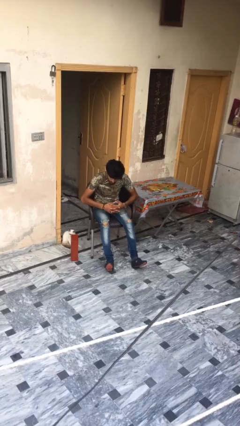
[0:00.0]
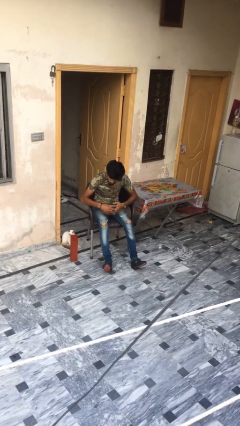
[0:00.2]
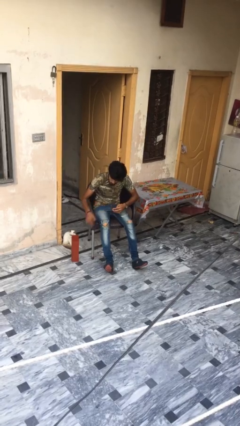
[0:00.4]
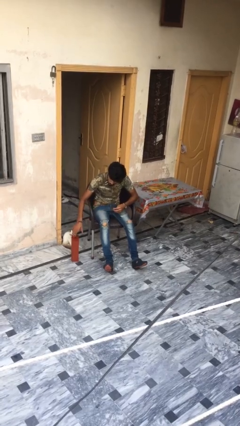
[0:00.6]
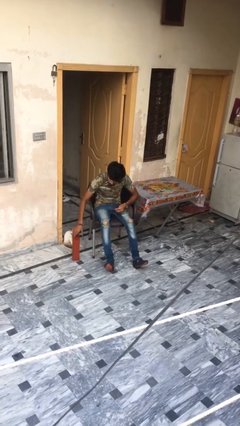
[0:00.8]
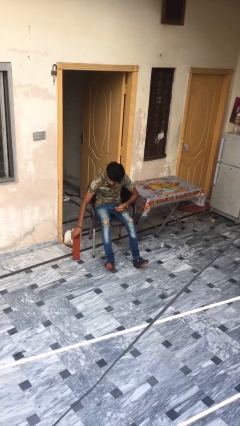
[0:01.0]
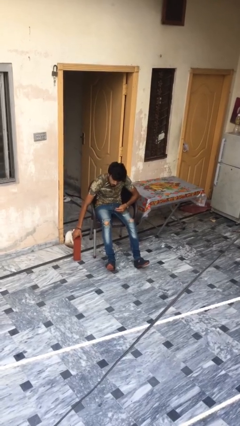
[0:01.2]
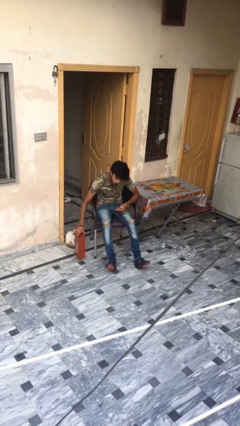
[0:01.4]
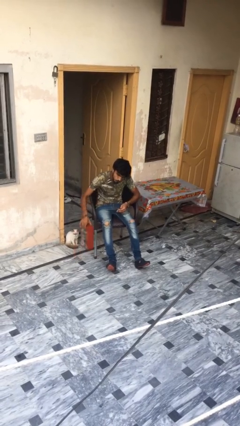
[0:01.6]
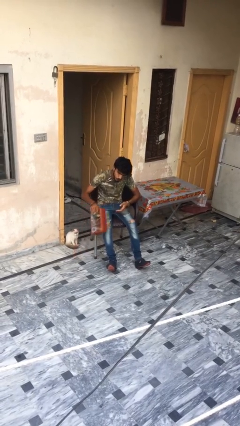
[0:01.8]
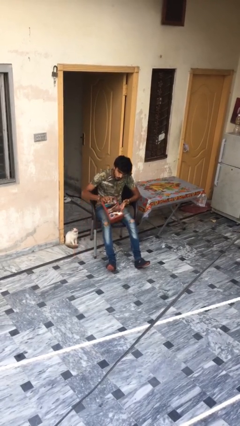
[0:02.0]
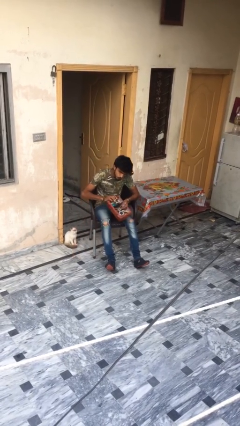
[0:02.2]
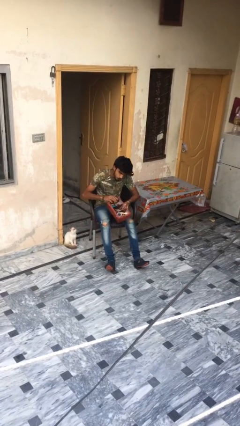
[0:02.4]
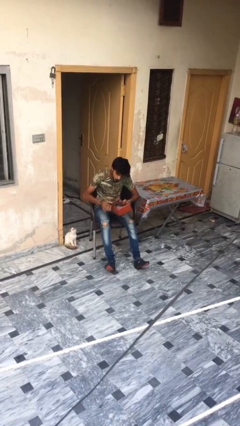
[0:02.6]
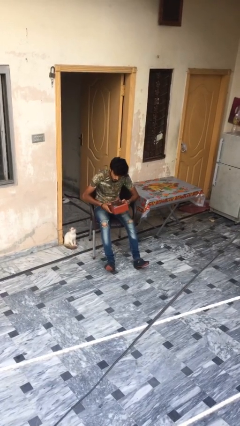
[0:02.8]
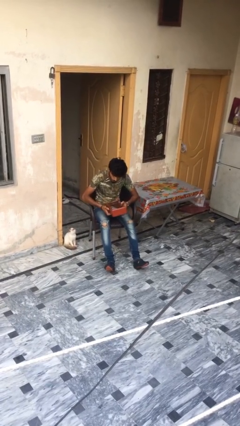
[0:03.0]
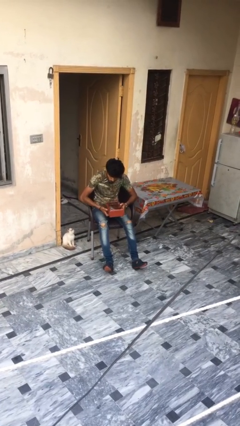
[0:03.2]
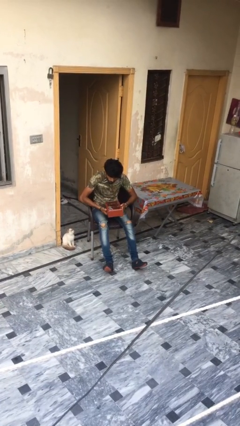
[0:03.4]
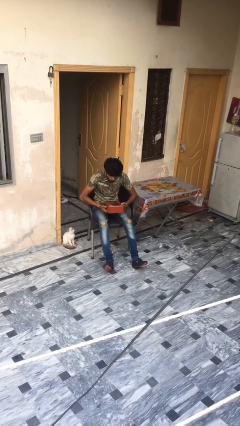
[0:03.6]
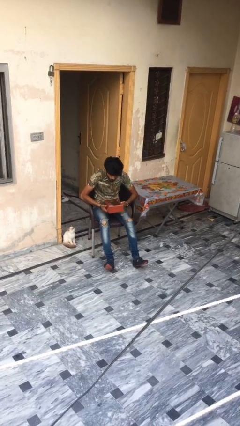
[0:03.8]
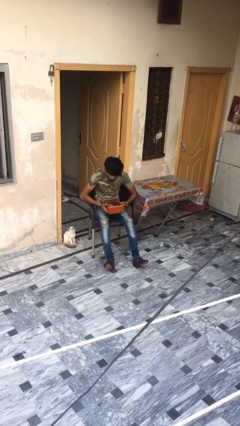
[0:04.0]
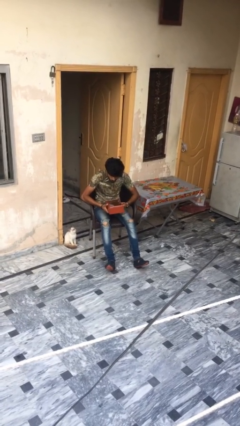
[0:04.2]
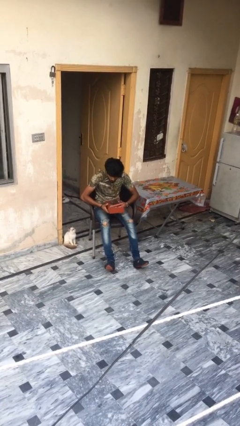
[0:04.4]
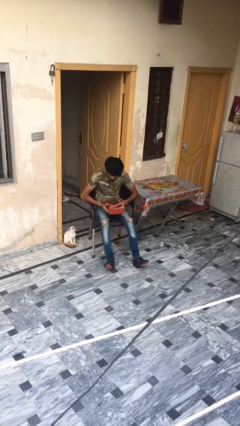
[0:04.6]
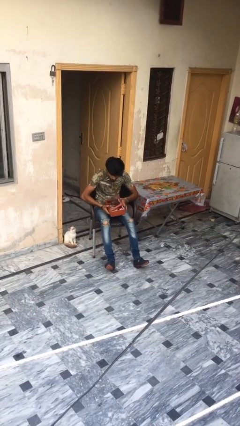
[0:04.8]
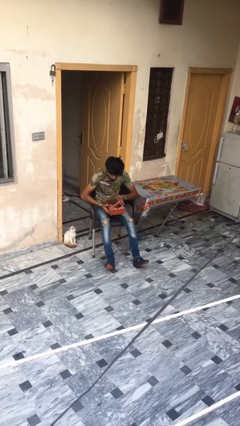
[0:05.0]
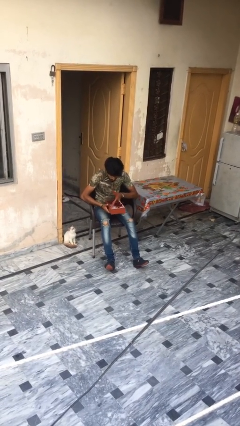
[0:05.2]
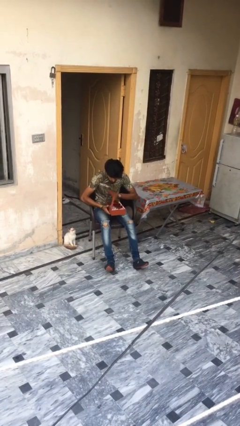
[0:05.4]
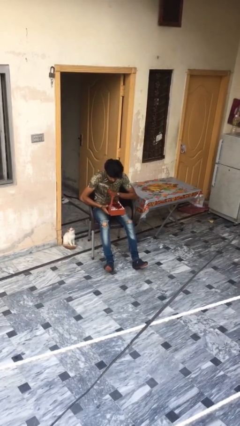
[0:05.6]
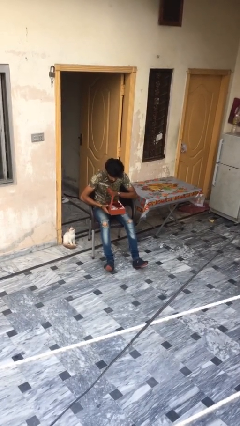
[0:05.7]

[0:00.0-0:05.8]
person picks up object from floor

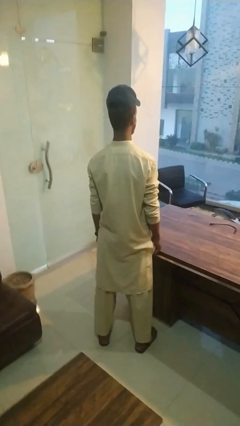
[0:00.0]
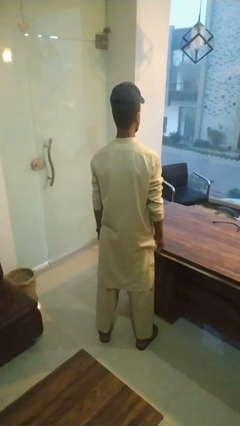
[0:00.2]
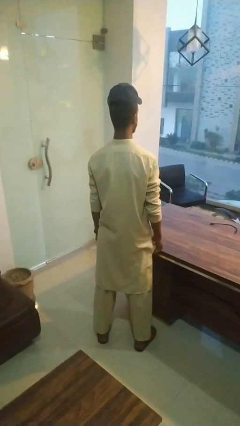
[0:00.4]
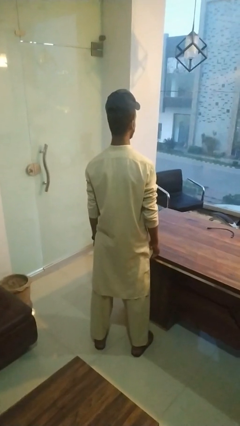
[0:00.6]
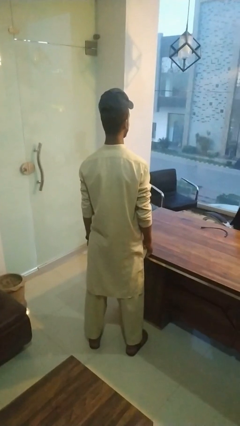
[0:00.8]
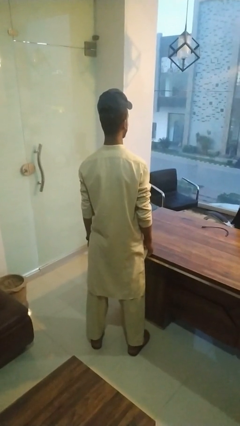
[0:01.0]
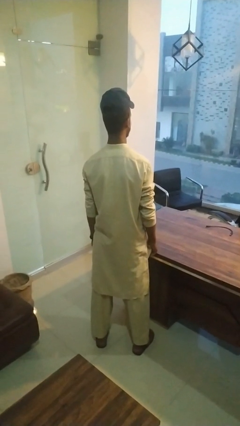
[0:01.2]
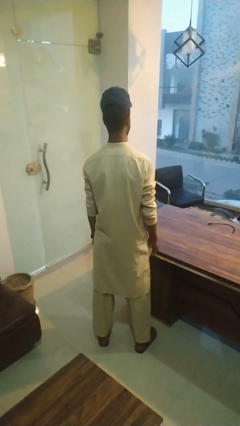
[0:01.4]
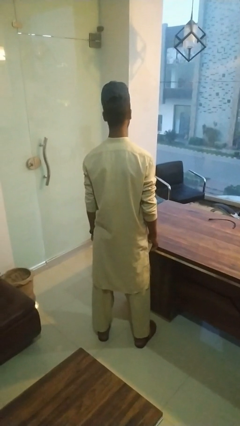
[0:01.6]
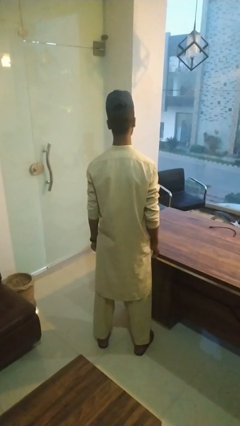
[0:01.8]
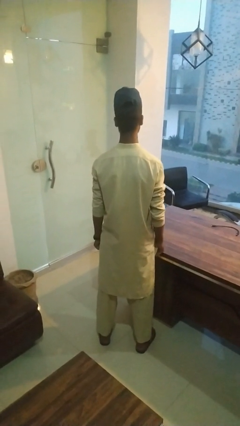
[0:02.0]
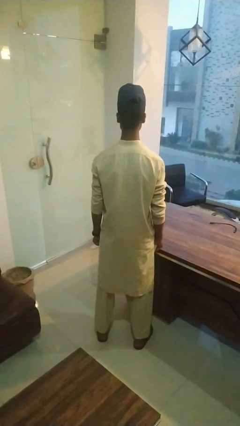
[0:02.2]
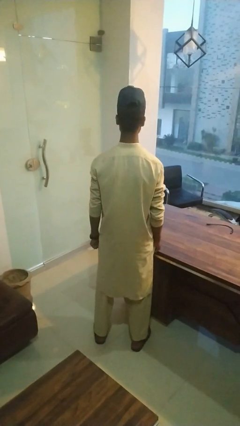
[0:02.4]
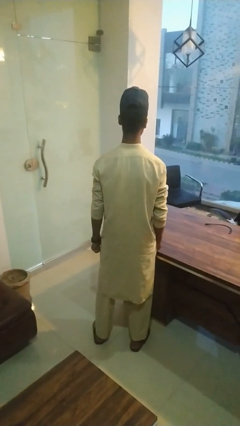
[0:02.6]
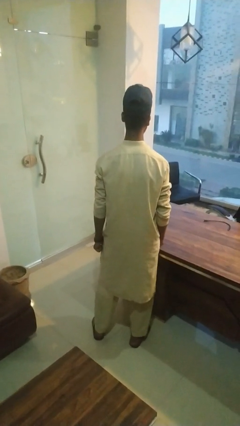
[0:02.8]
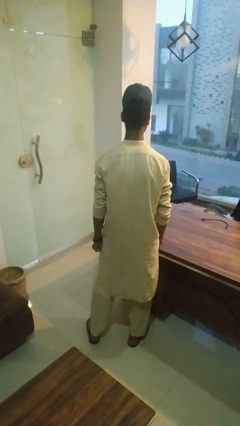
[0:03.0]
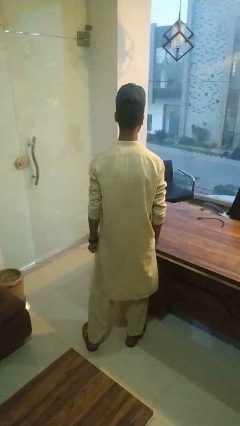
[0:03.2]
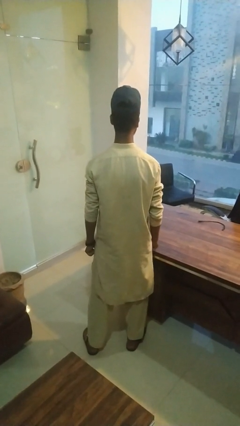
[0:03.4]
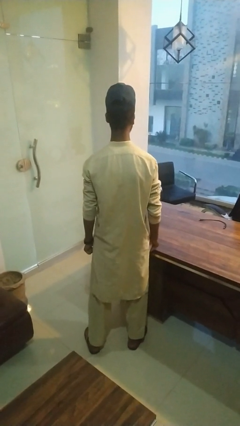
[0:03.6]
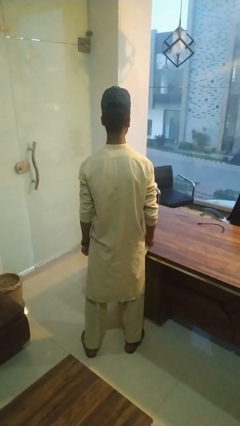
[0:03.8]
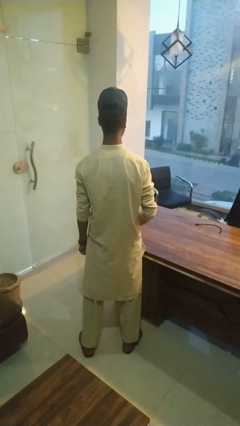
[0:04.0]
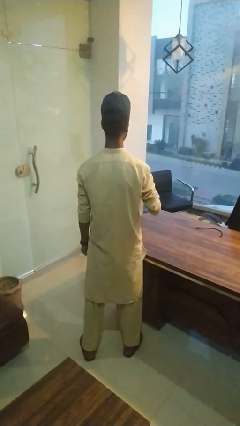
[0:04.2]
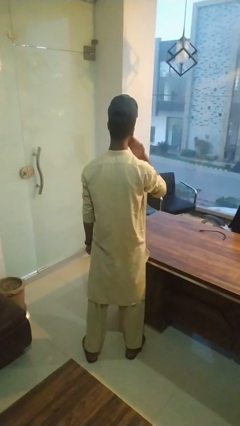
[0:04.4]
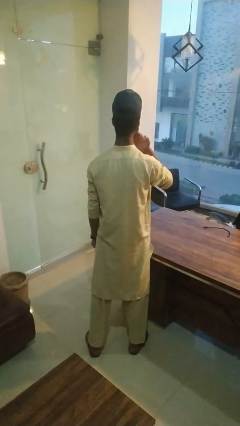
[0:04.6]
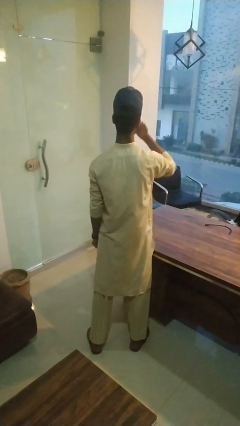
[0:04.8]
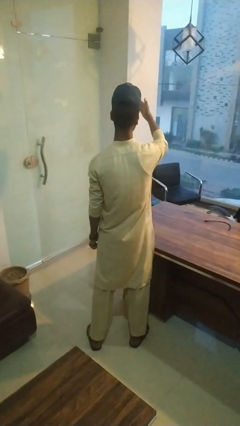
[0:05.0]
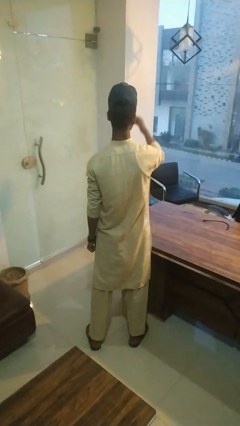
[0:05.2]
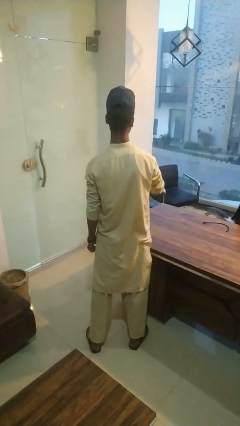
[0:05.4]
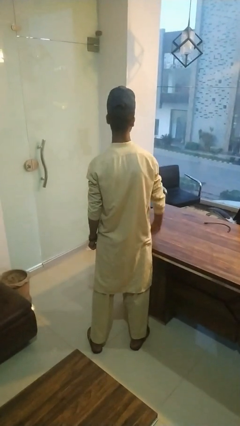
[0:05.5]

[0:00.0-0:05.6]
person gestures blow kiss

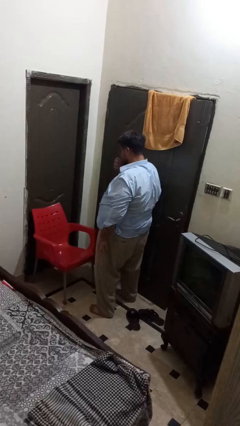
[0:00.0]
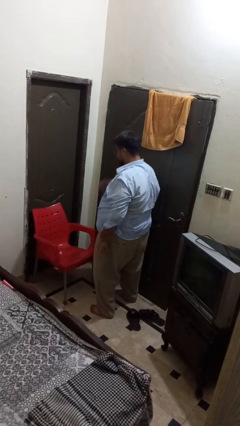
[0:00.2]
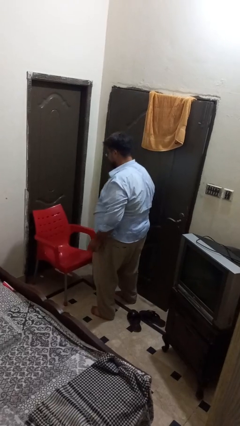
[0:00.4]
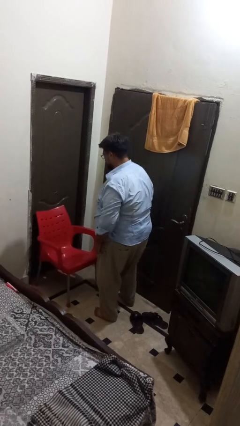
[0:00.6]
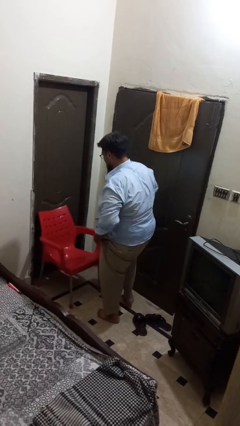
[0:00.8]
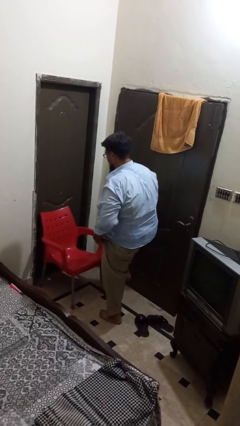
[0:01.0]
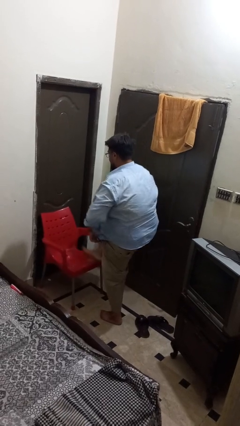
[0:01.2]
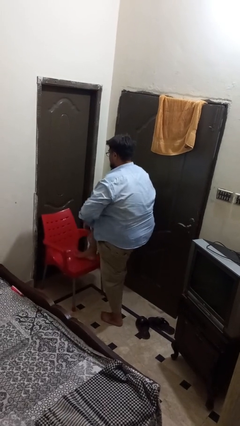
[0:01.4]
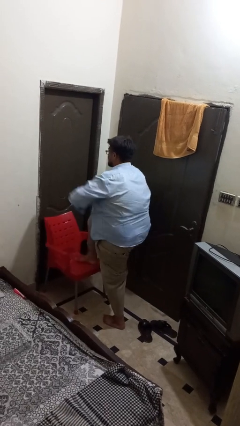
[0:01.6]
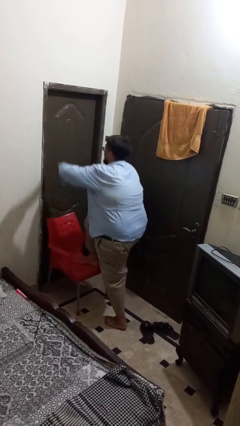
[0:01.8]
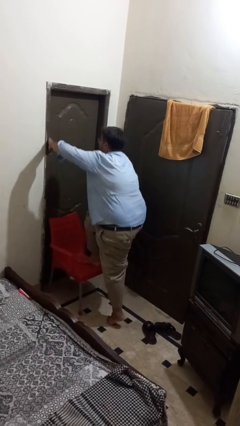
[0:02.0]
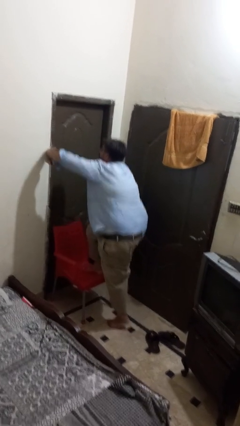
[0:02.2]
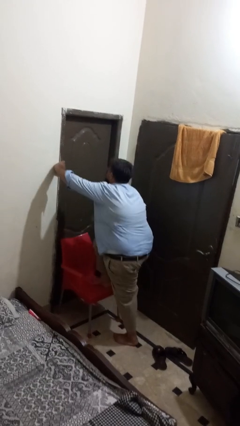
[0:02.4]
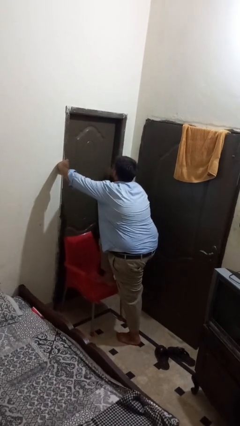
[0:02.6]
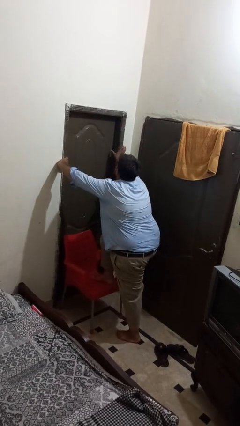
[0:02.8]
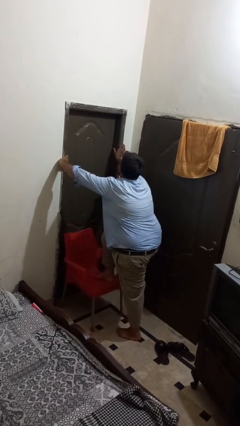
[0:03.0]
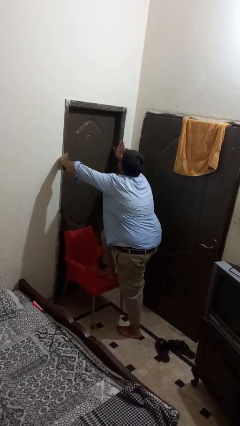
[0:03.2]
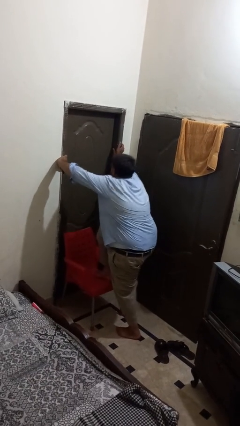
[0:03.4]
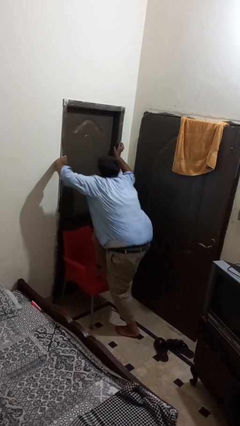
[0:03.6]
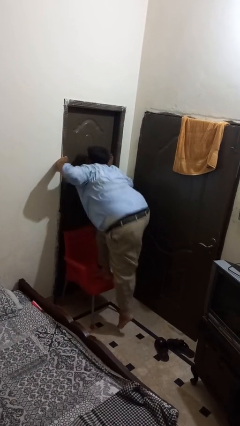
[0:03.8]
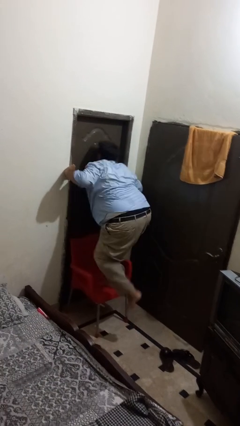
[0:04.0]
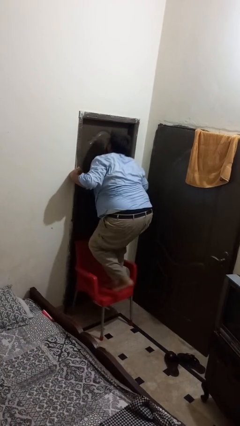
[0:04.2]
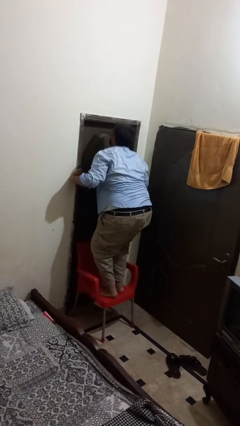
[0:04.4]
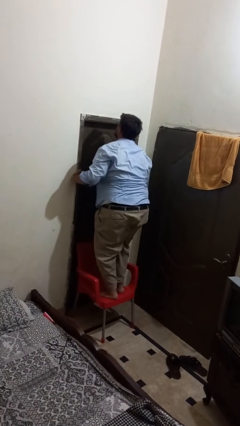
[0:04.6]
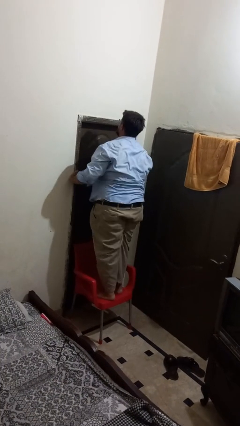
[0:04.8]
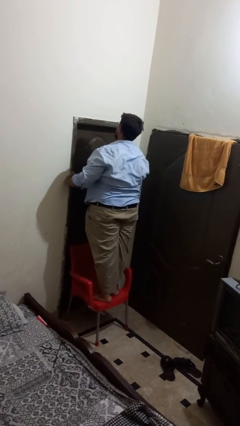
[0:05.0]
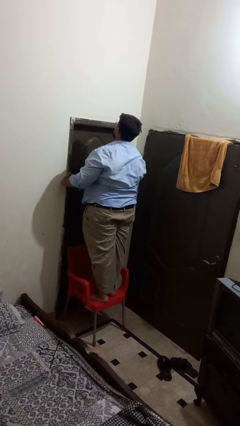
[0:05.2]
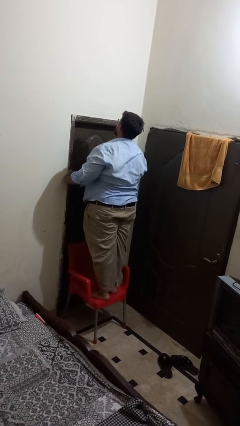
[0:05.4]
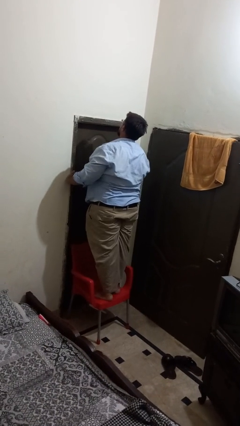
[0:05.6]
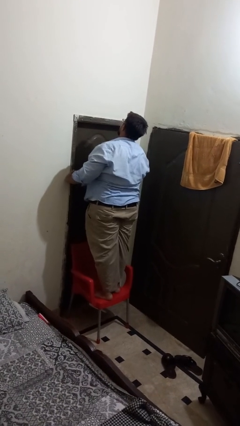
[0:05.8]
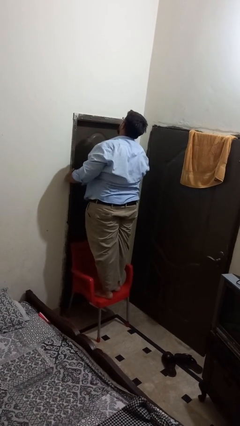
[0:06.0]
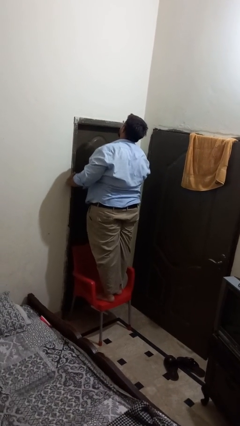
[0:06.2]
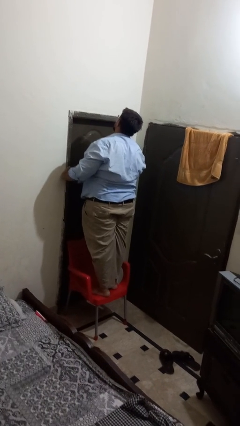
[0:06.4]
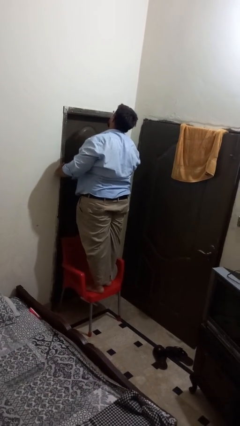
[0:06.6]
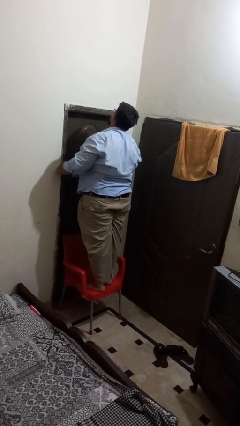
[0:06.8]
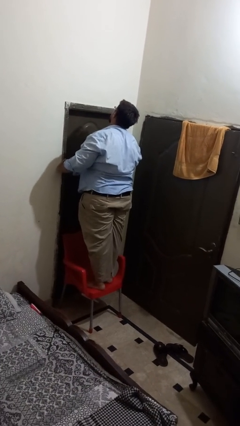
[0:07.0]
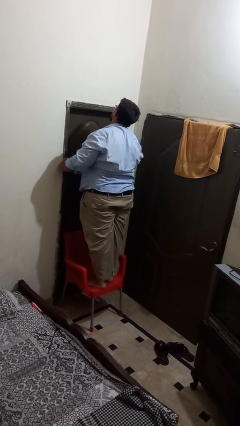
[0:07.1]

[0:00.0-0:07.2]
person climbs on chair
